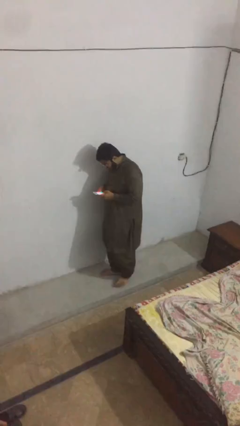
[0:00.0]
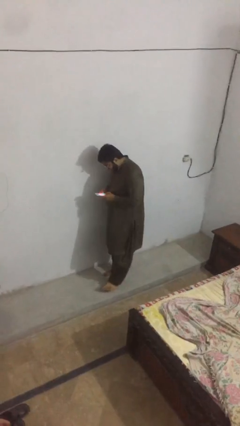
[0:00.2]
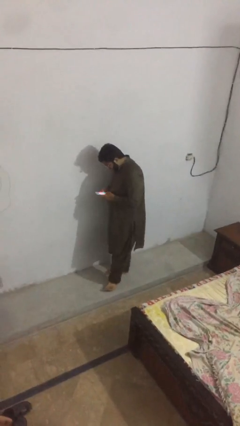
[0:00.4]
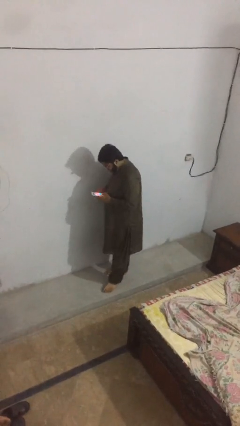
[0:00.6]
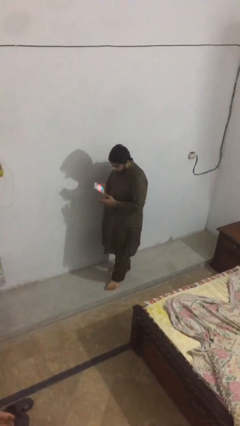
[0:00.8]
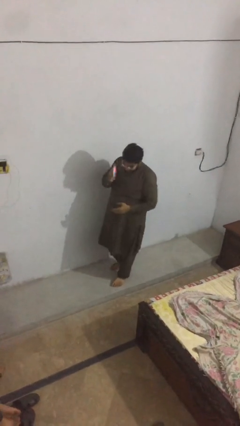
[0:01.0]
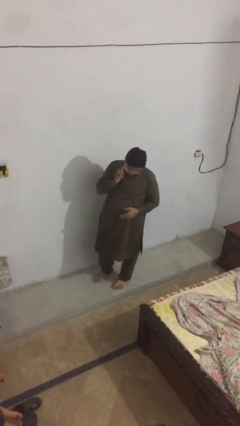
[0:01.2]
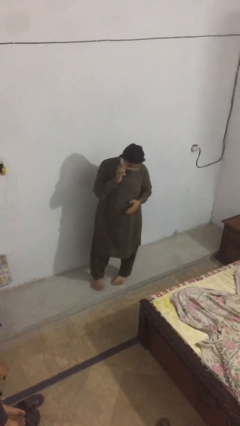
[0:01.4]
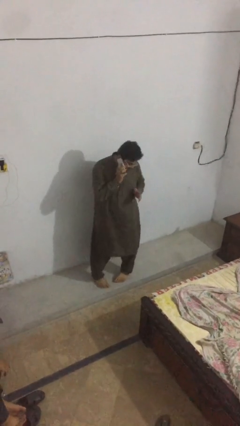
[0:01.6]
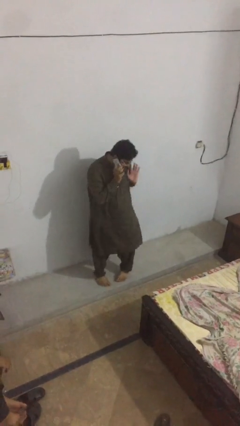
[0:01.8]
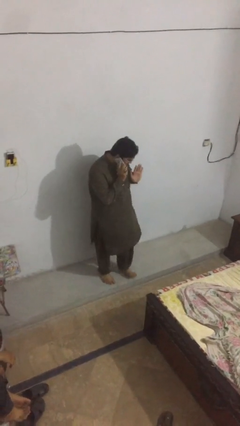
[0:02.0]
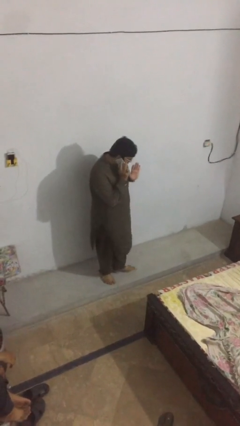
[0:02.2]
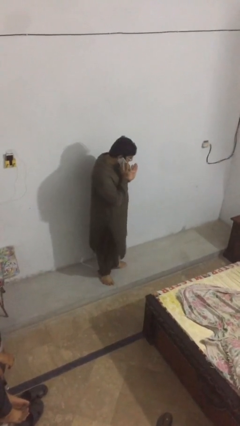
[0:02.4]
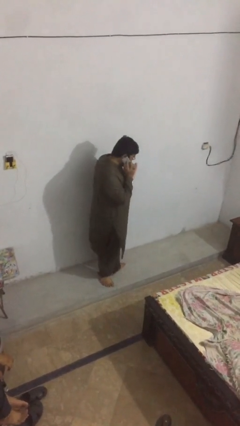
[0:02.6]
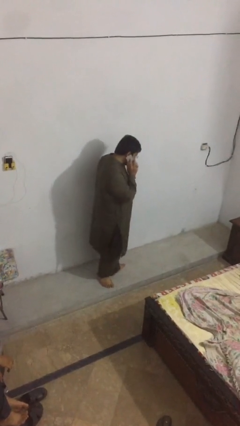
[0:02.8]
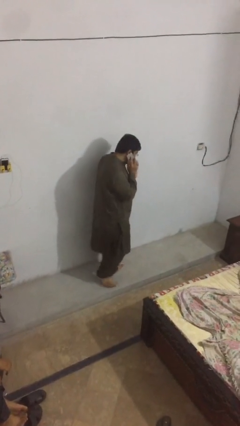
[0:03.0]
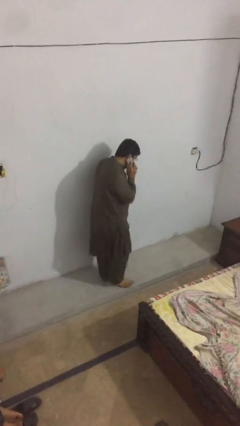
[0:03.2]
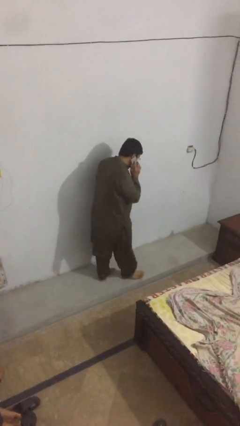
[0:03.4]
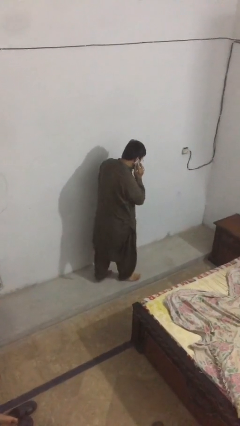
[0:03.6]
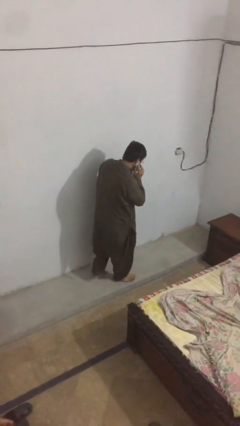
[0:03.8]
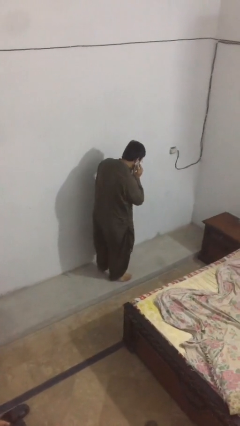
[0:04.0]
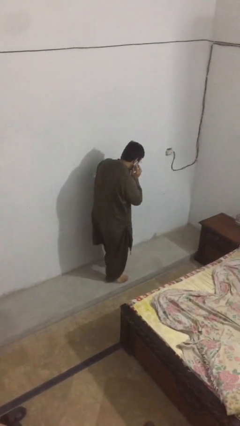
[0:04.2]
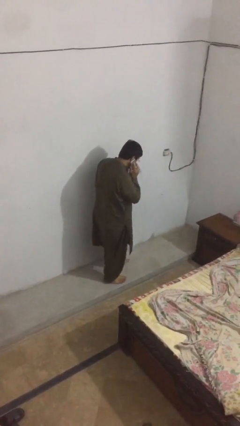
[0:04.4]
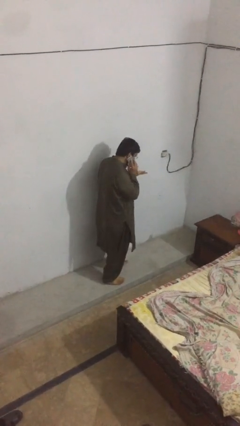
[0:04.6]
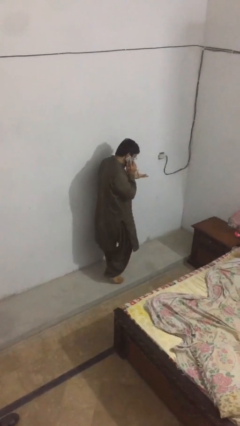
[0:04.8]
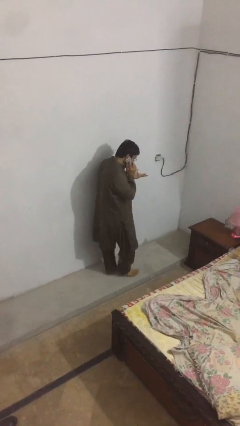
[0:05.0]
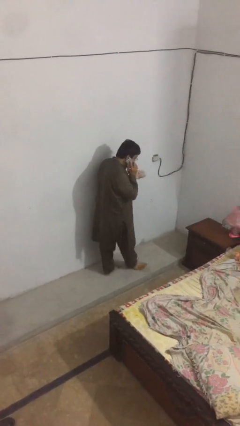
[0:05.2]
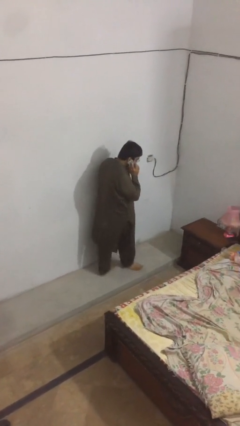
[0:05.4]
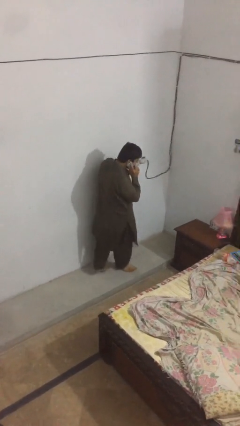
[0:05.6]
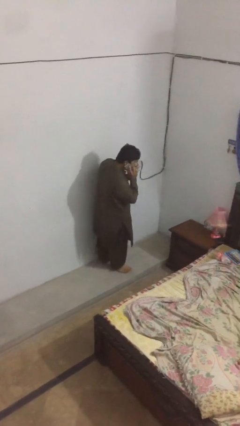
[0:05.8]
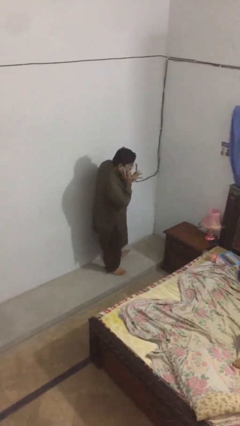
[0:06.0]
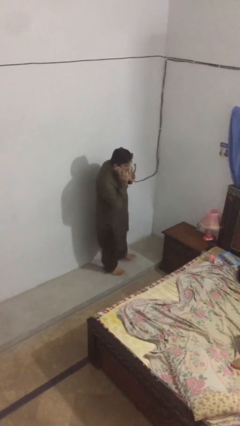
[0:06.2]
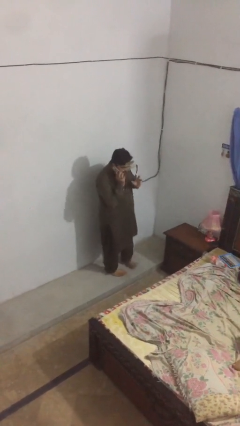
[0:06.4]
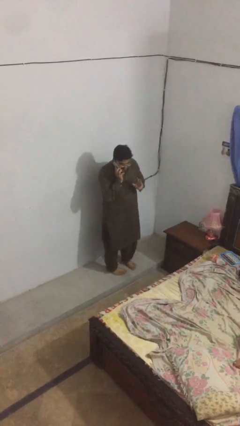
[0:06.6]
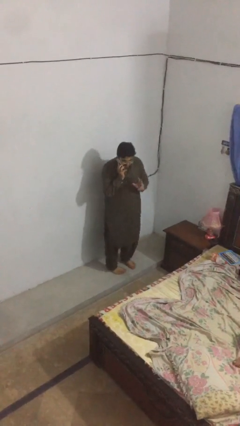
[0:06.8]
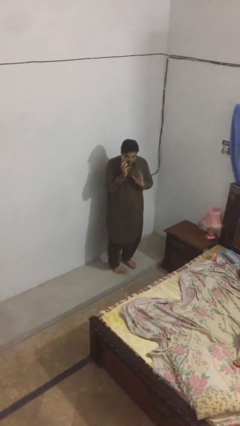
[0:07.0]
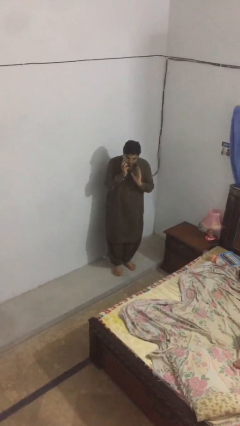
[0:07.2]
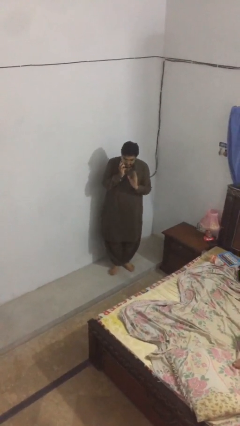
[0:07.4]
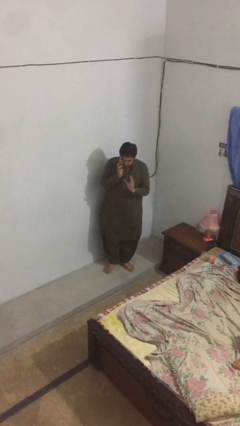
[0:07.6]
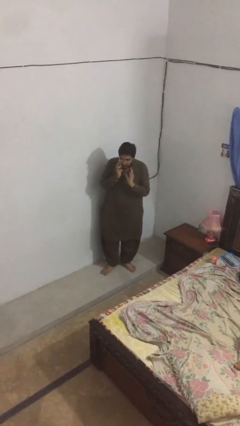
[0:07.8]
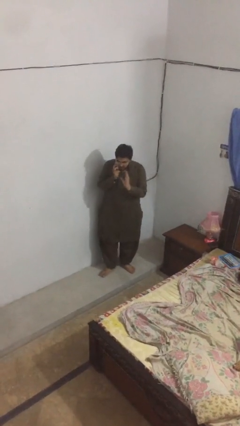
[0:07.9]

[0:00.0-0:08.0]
person talks on phone

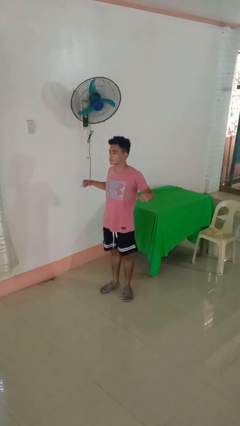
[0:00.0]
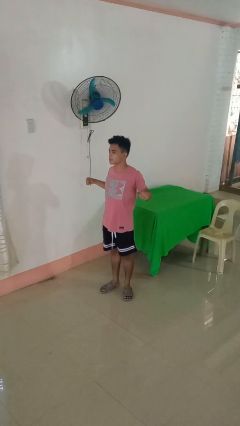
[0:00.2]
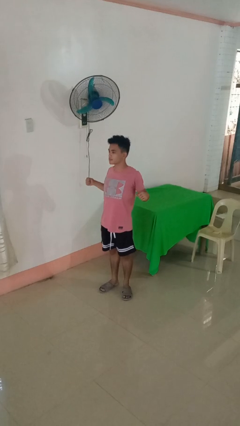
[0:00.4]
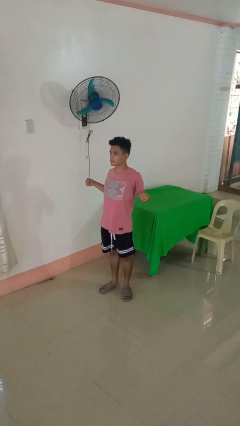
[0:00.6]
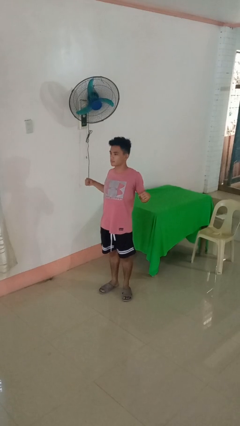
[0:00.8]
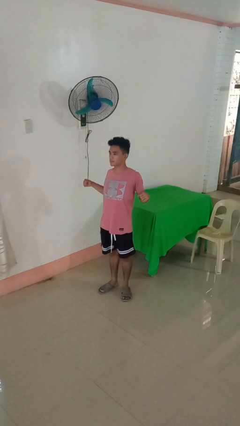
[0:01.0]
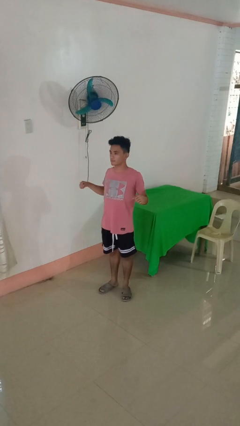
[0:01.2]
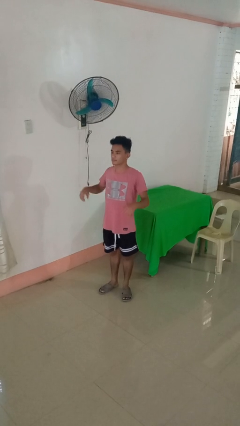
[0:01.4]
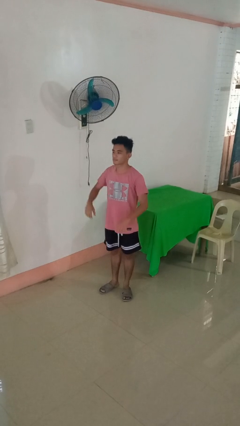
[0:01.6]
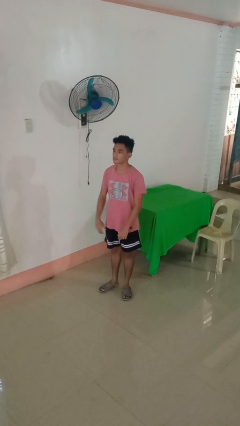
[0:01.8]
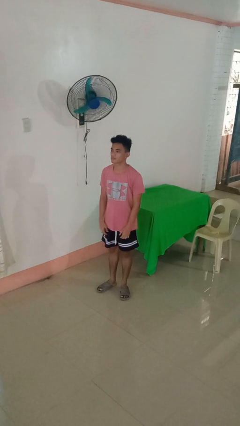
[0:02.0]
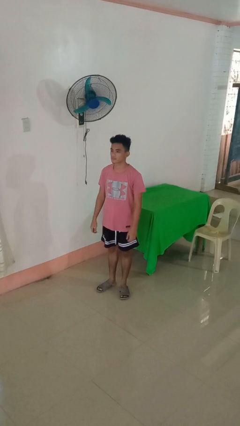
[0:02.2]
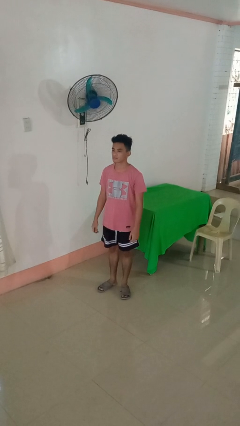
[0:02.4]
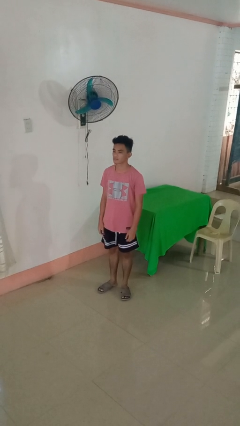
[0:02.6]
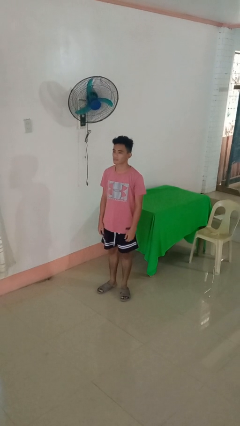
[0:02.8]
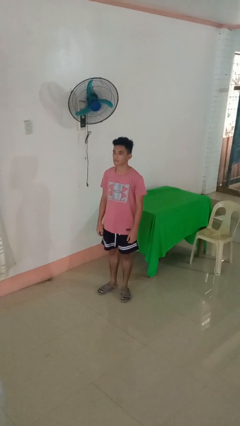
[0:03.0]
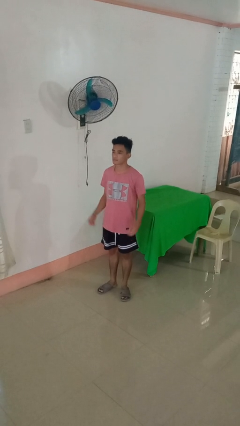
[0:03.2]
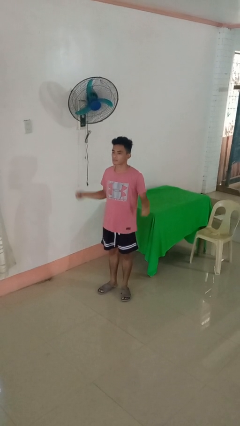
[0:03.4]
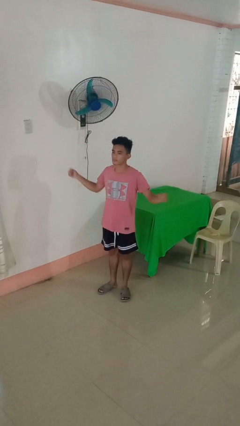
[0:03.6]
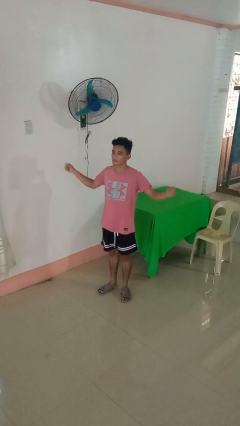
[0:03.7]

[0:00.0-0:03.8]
person stretches back

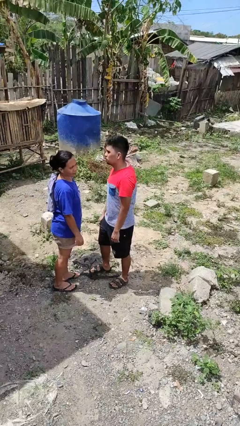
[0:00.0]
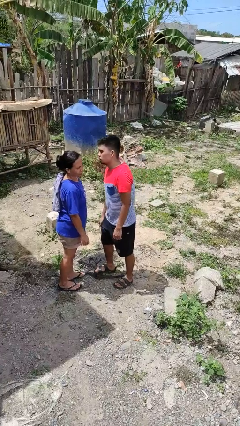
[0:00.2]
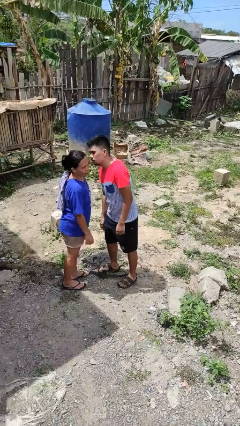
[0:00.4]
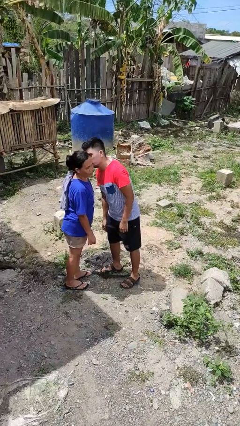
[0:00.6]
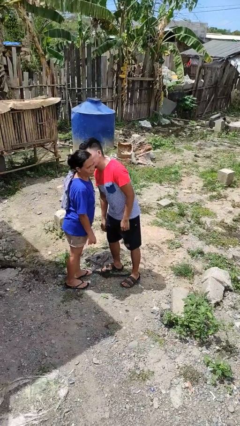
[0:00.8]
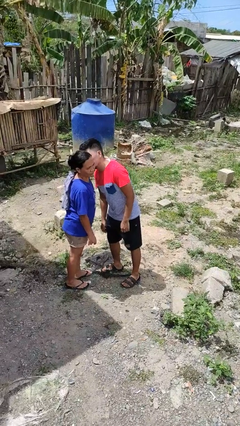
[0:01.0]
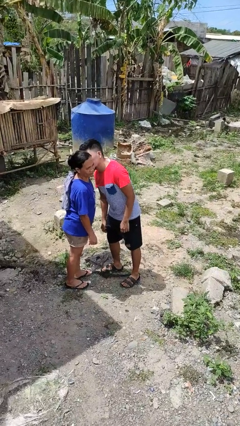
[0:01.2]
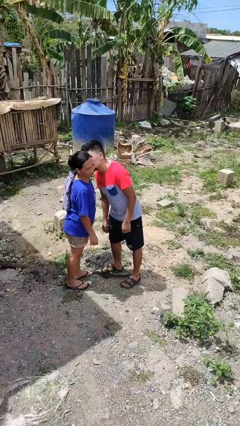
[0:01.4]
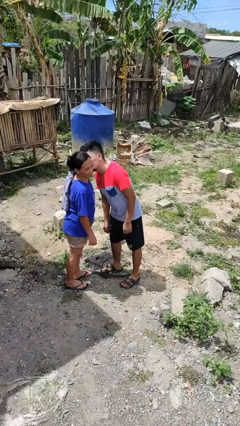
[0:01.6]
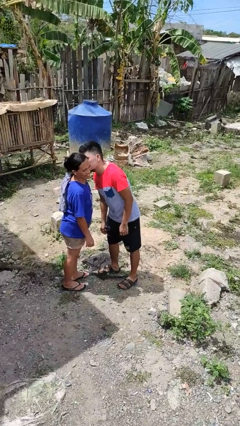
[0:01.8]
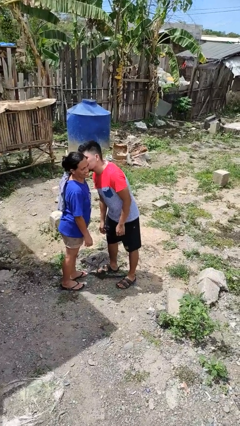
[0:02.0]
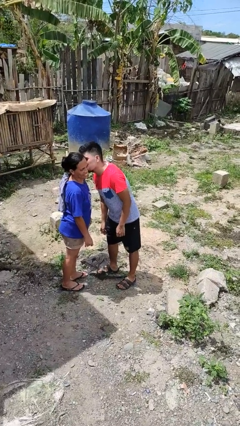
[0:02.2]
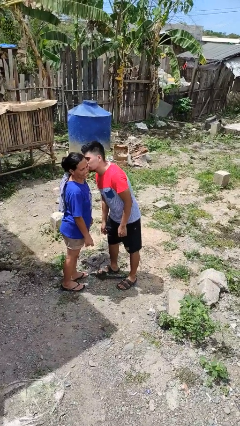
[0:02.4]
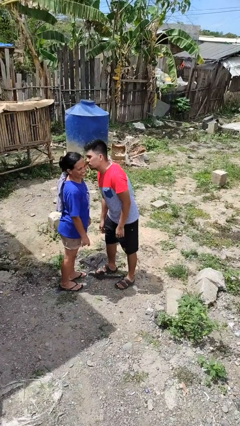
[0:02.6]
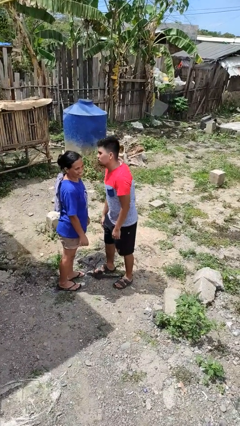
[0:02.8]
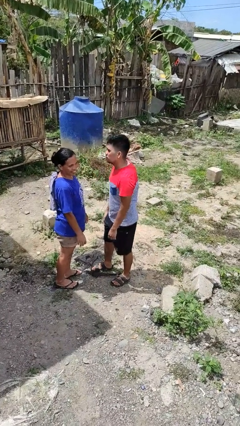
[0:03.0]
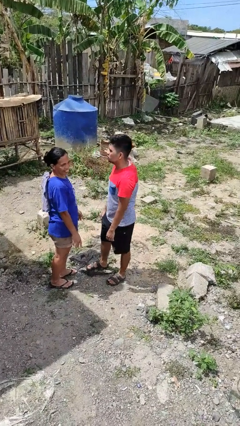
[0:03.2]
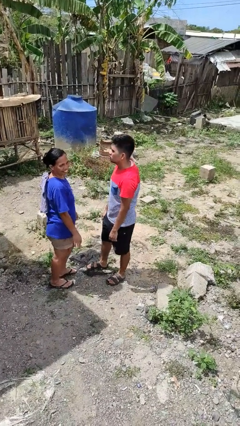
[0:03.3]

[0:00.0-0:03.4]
person kisses cheek of person

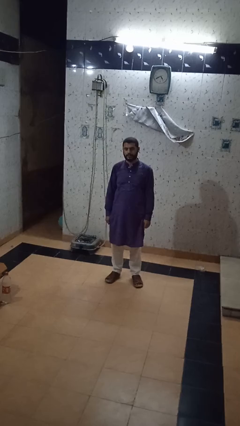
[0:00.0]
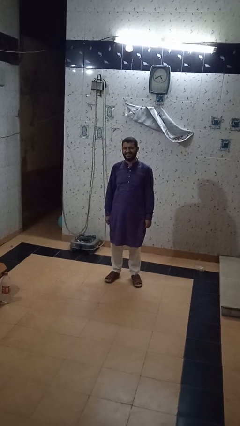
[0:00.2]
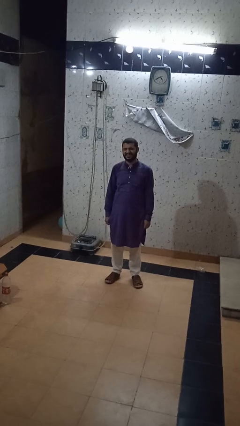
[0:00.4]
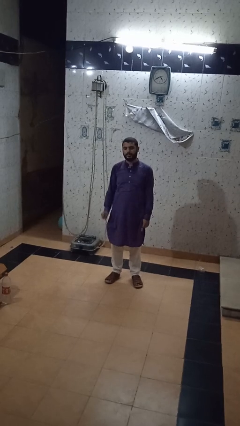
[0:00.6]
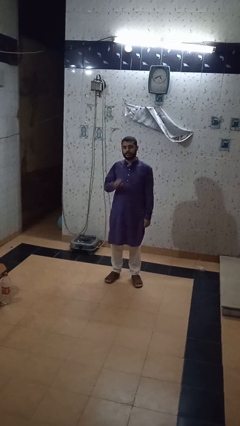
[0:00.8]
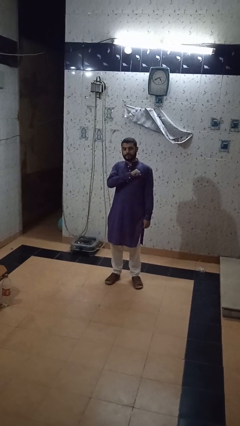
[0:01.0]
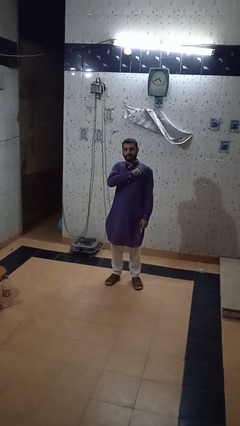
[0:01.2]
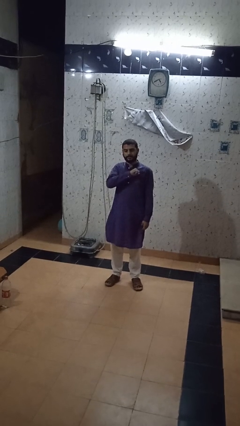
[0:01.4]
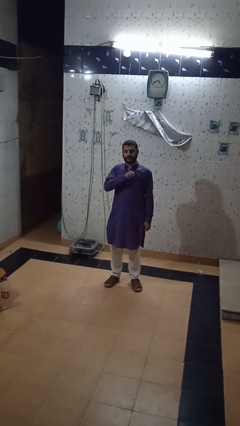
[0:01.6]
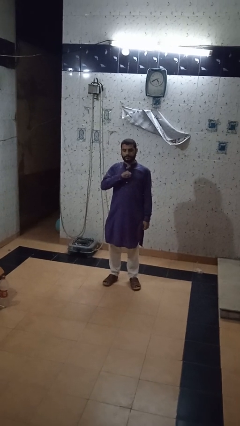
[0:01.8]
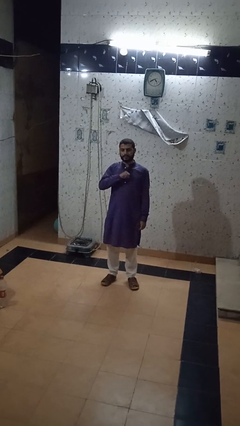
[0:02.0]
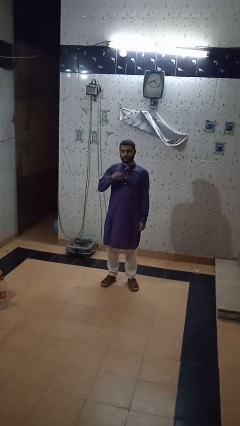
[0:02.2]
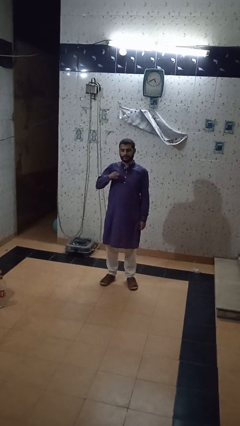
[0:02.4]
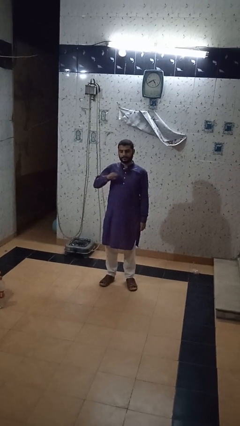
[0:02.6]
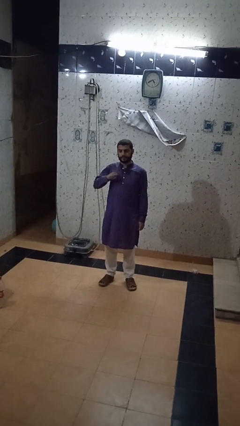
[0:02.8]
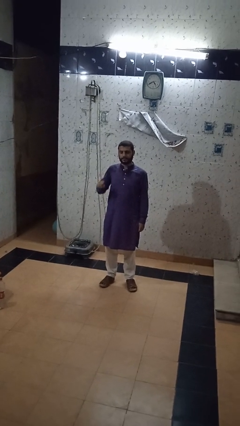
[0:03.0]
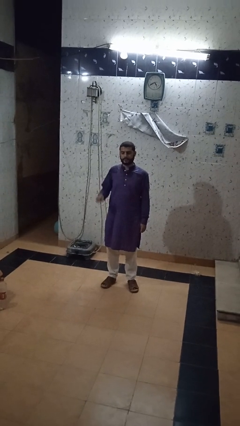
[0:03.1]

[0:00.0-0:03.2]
person drums on chest
